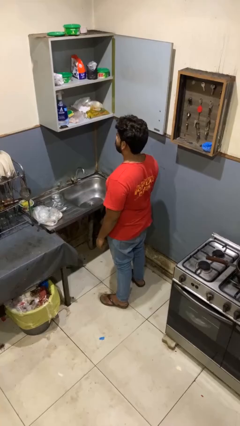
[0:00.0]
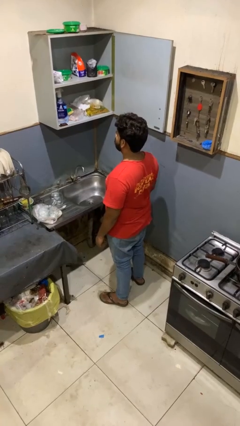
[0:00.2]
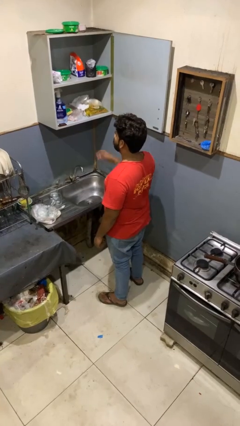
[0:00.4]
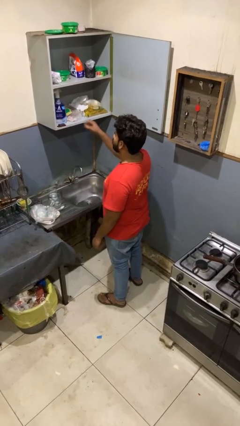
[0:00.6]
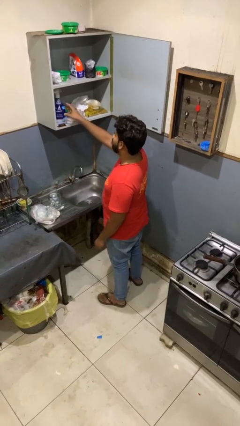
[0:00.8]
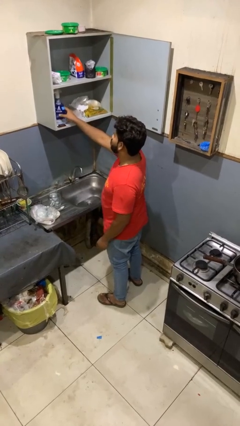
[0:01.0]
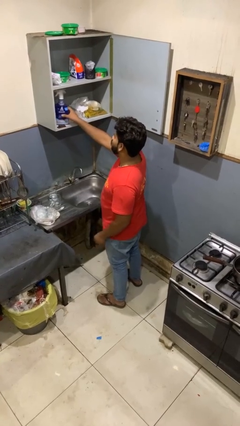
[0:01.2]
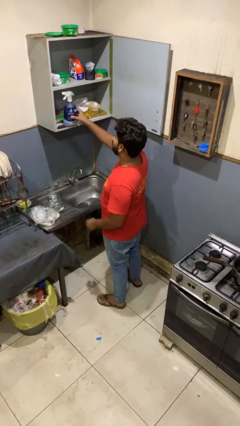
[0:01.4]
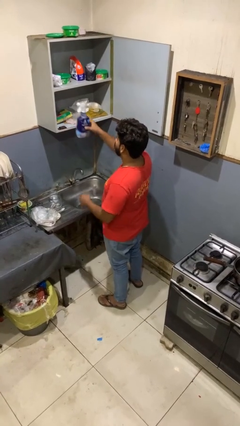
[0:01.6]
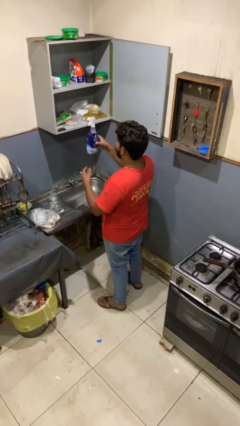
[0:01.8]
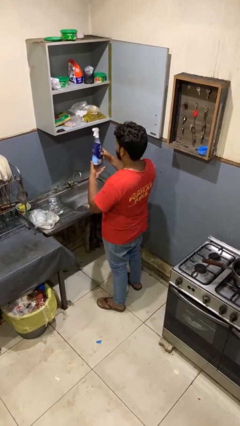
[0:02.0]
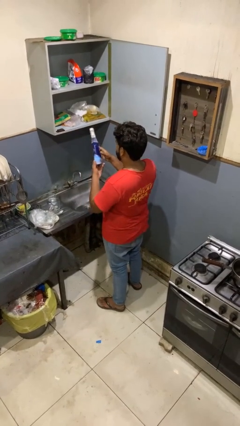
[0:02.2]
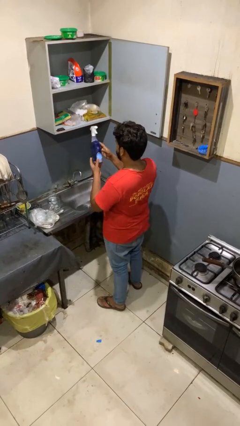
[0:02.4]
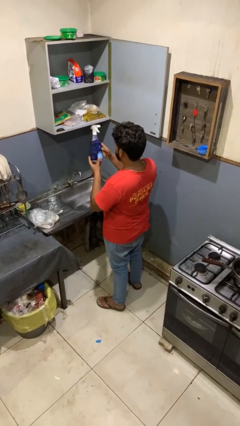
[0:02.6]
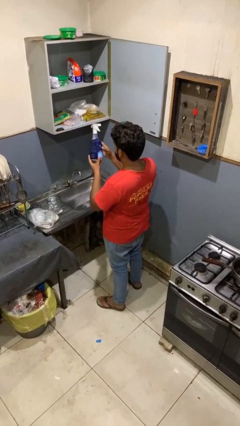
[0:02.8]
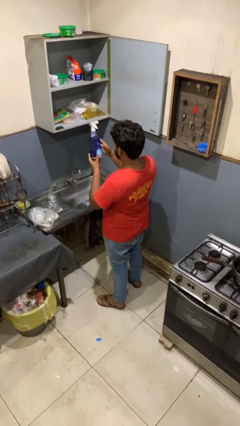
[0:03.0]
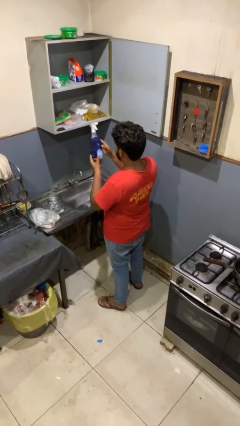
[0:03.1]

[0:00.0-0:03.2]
person picks up object from cabinet

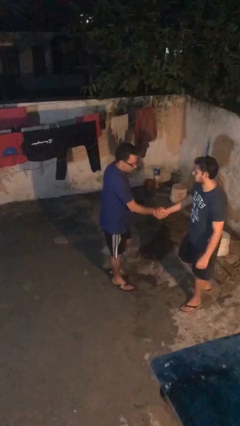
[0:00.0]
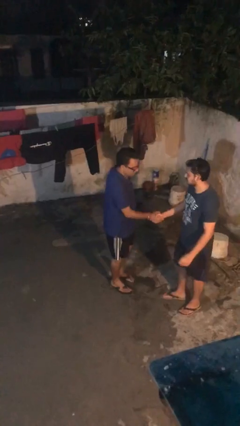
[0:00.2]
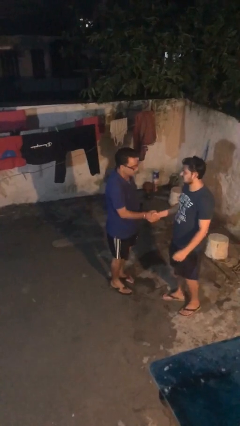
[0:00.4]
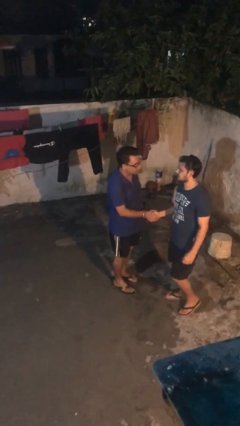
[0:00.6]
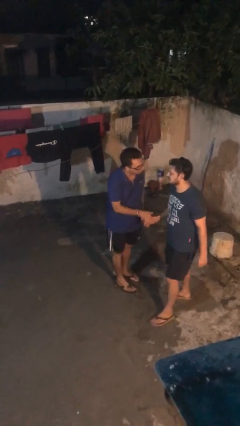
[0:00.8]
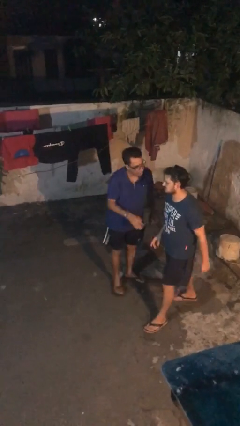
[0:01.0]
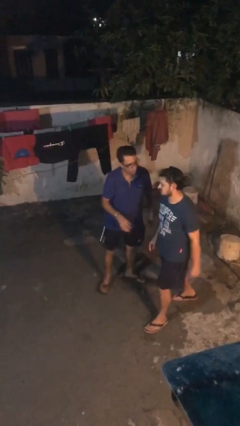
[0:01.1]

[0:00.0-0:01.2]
person shakes hand

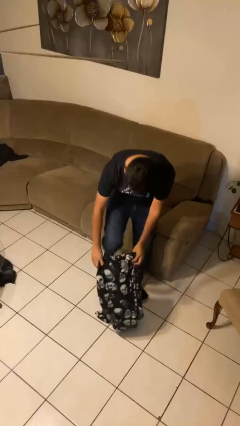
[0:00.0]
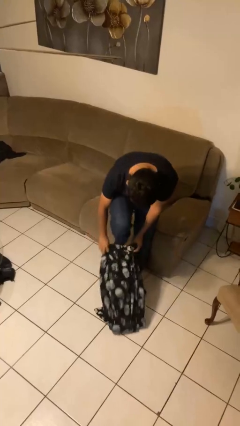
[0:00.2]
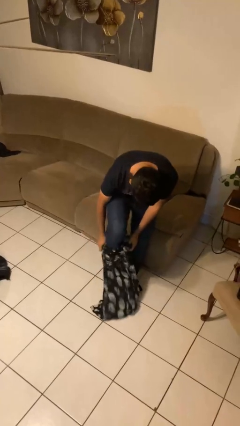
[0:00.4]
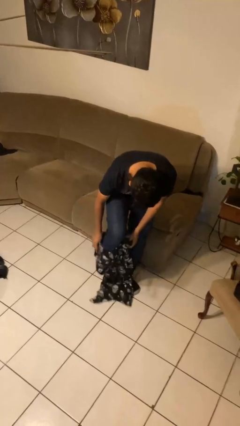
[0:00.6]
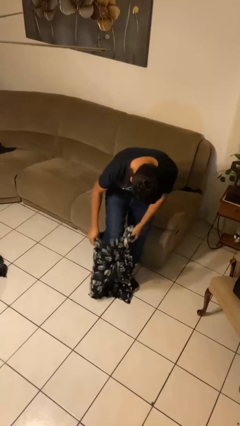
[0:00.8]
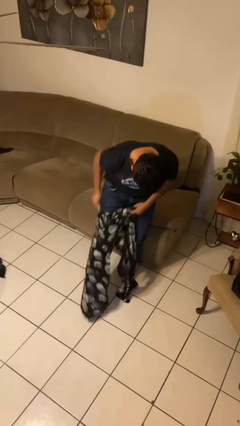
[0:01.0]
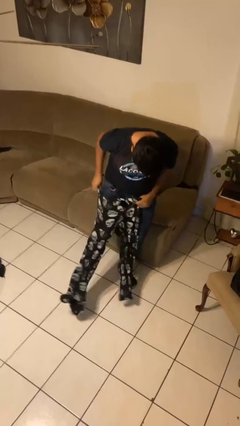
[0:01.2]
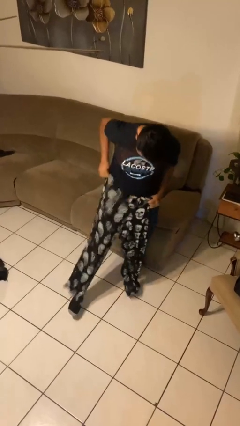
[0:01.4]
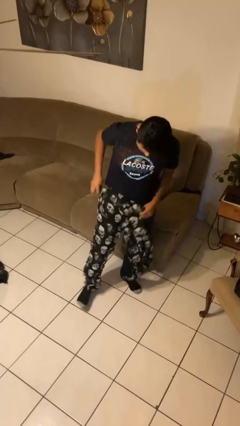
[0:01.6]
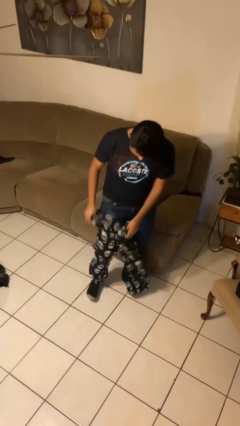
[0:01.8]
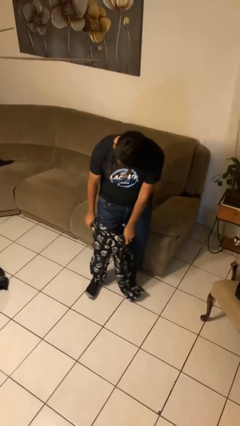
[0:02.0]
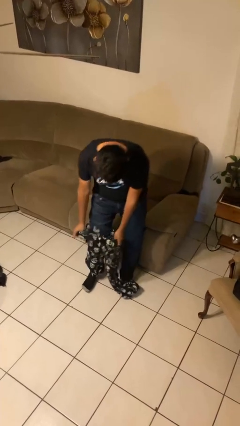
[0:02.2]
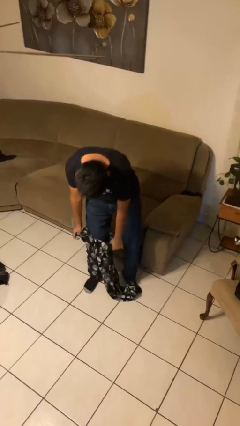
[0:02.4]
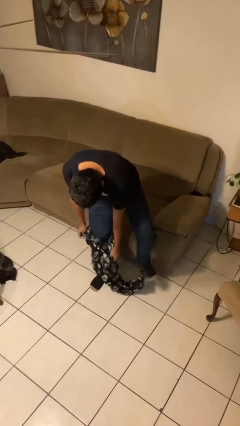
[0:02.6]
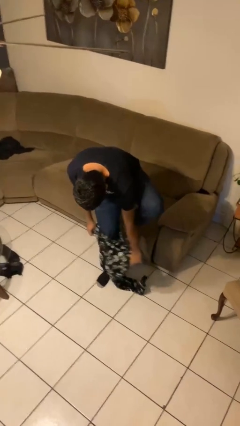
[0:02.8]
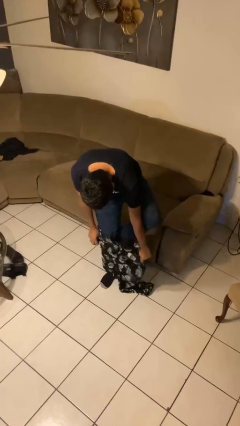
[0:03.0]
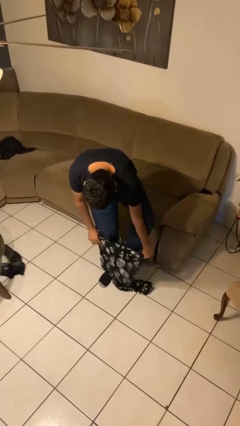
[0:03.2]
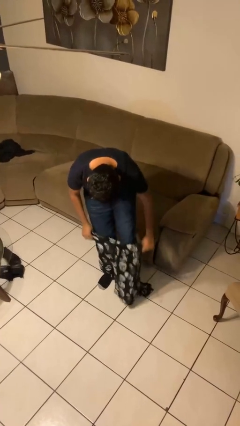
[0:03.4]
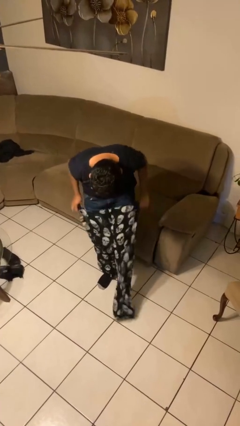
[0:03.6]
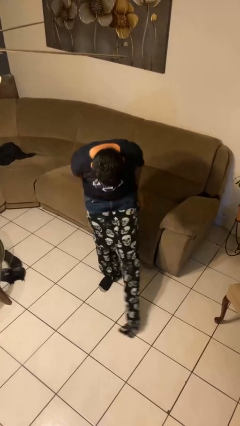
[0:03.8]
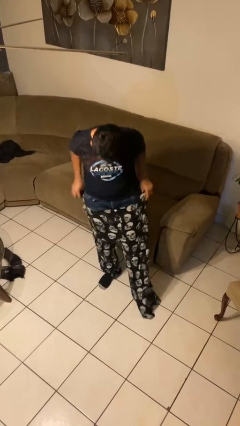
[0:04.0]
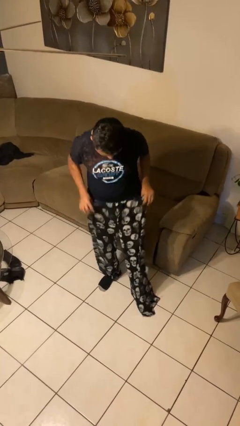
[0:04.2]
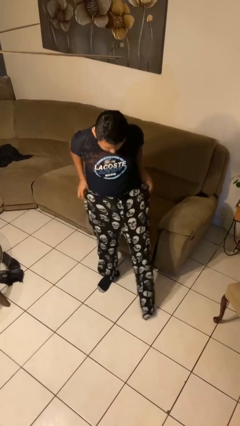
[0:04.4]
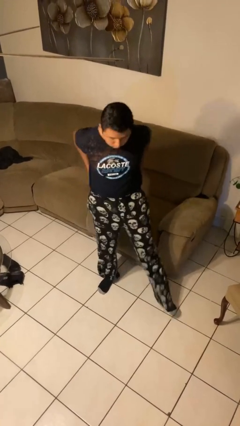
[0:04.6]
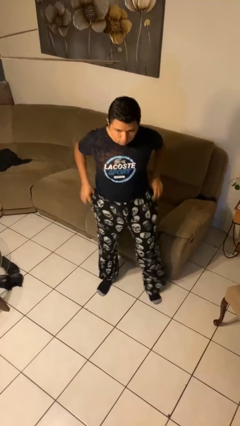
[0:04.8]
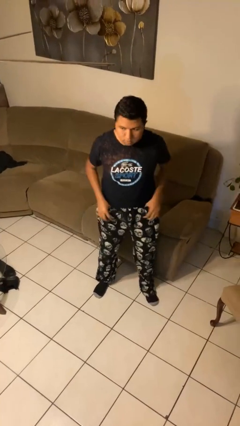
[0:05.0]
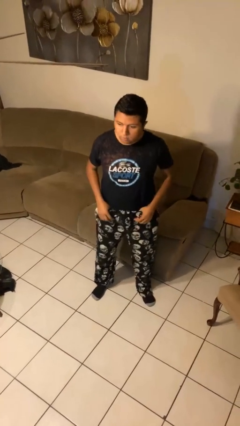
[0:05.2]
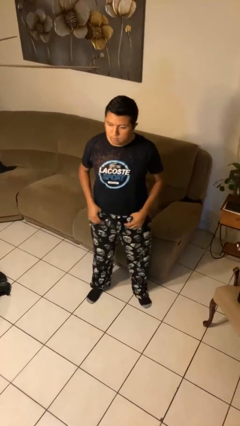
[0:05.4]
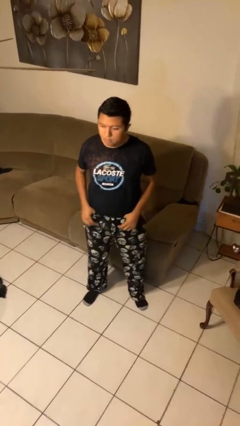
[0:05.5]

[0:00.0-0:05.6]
person takes off pants

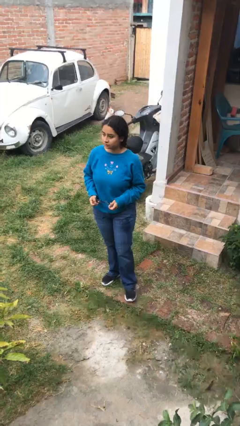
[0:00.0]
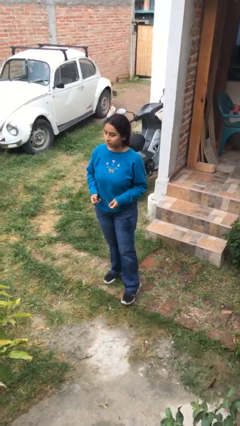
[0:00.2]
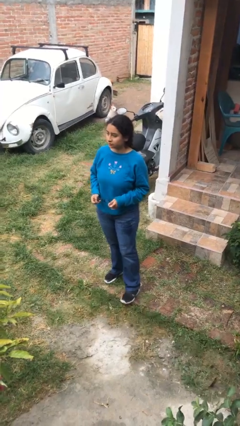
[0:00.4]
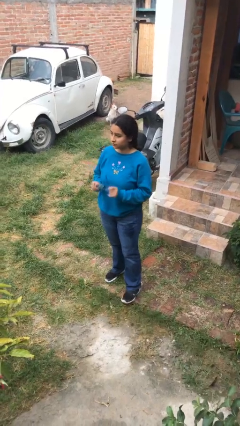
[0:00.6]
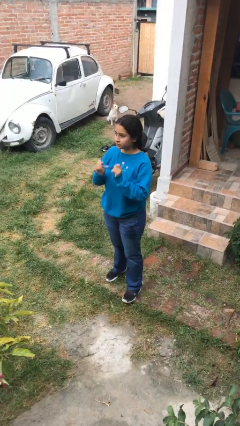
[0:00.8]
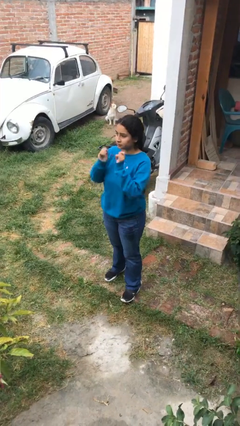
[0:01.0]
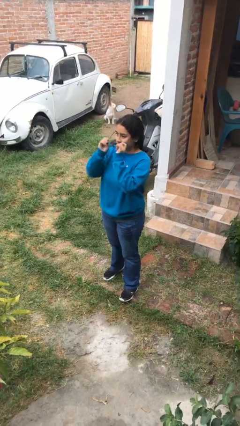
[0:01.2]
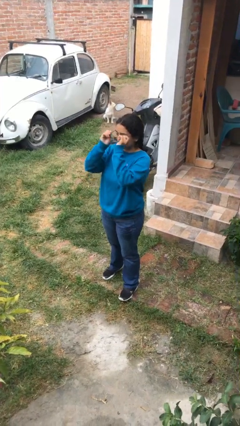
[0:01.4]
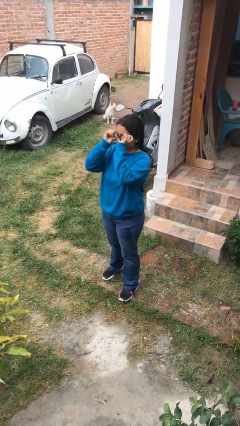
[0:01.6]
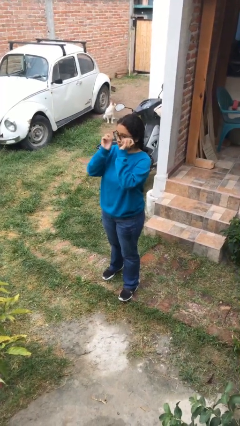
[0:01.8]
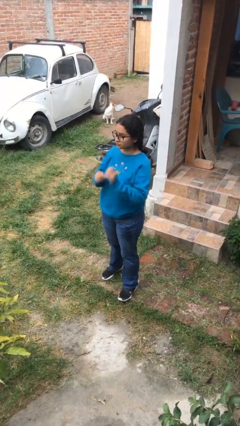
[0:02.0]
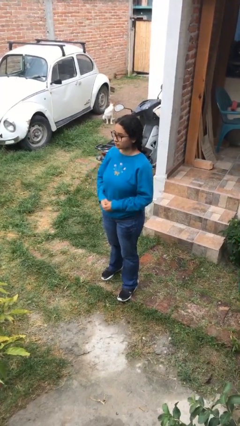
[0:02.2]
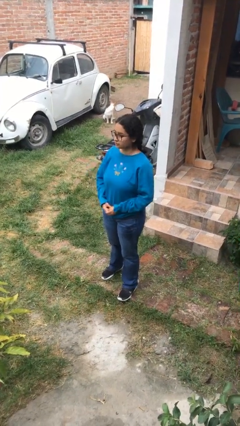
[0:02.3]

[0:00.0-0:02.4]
person puts on glasses

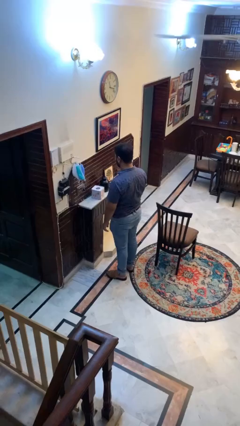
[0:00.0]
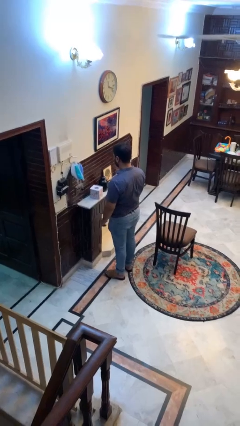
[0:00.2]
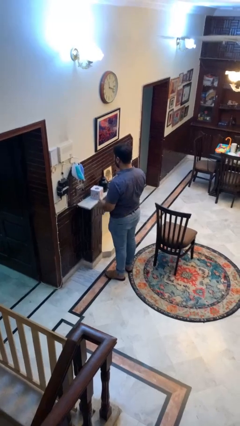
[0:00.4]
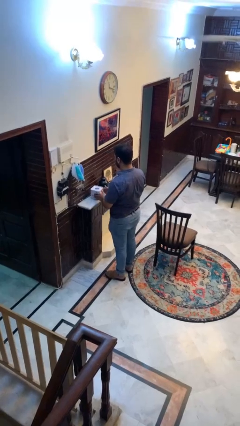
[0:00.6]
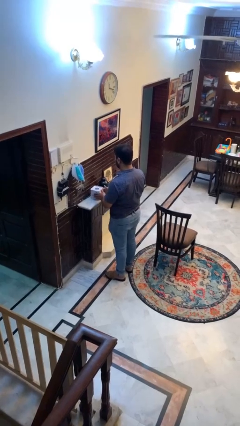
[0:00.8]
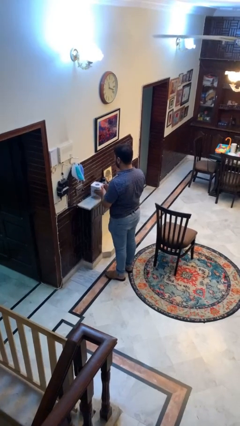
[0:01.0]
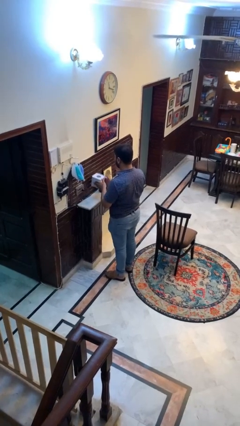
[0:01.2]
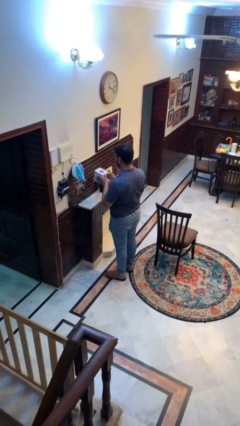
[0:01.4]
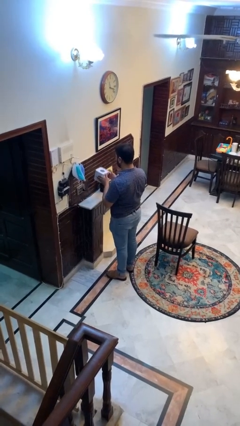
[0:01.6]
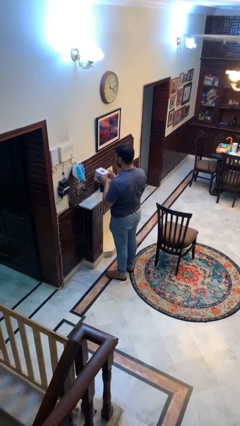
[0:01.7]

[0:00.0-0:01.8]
person picks up object from countertop

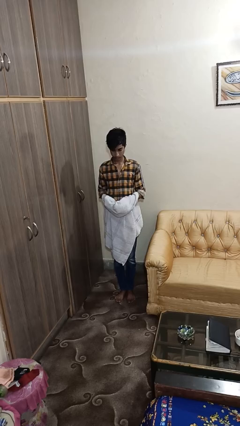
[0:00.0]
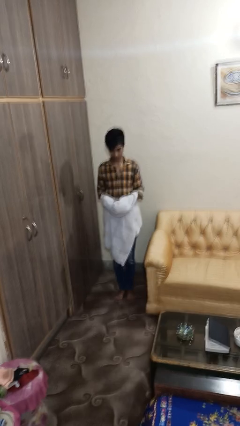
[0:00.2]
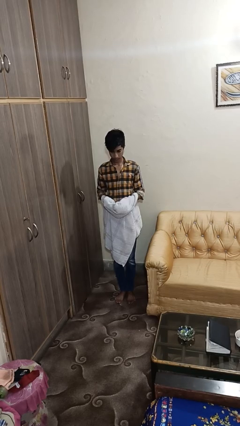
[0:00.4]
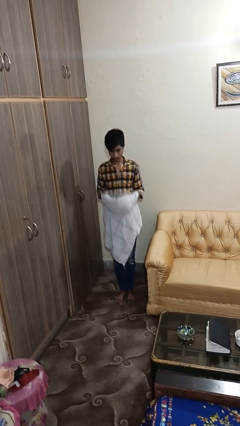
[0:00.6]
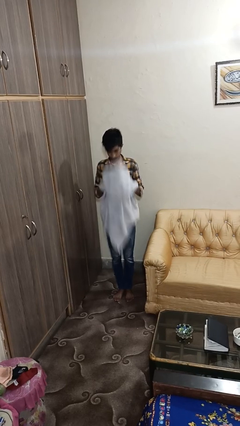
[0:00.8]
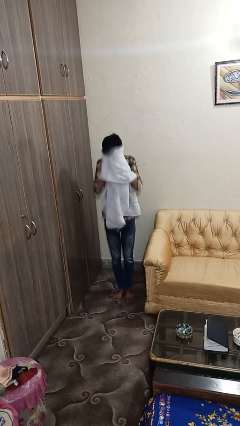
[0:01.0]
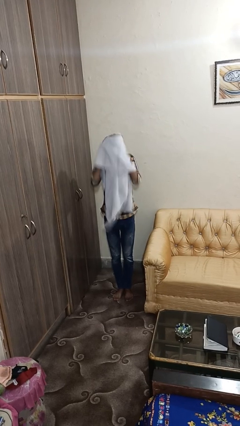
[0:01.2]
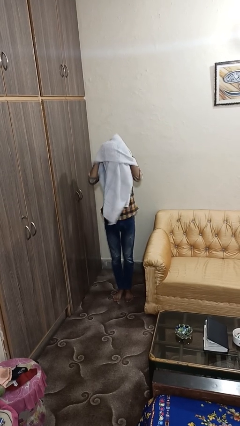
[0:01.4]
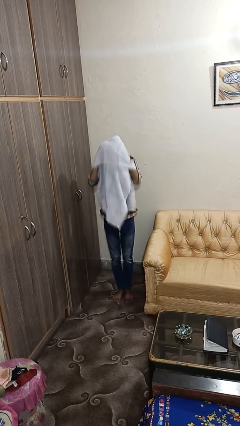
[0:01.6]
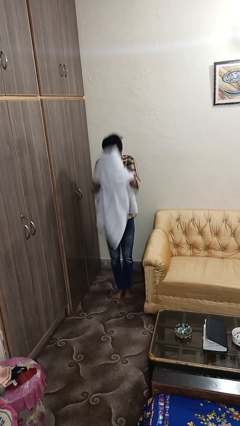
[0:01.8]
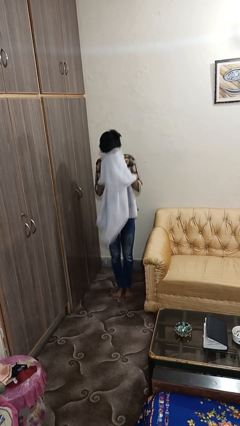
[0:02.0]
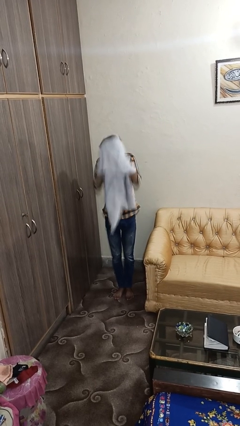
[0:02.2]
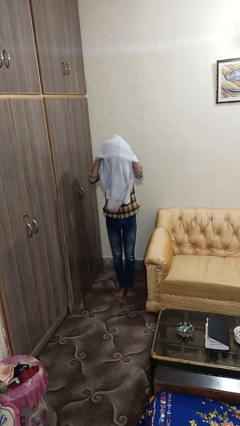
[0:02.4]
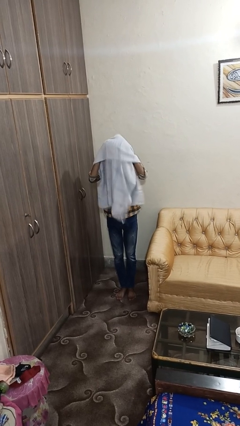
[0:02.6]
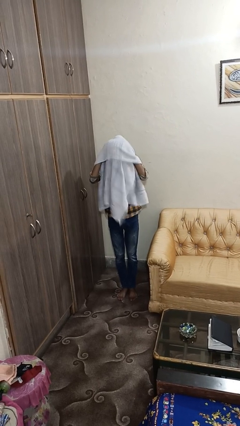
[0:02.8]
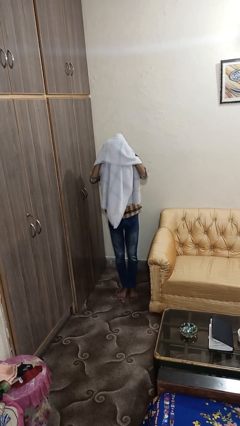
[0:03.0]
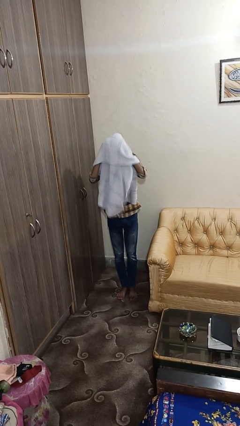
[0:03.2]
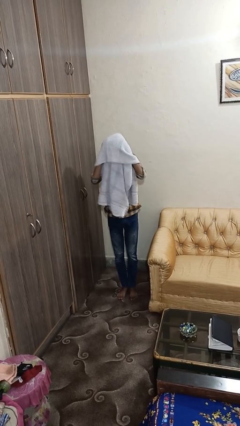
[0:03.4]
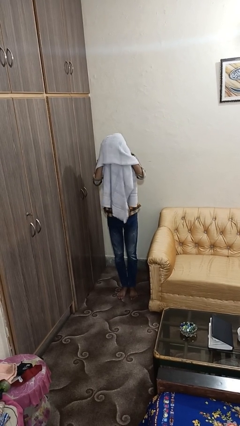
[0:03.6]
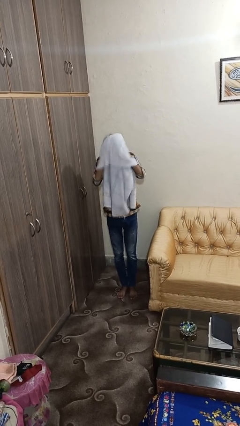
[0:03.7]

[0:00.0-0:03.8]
person dries hair with towel
